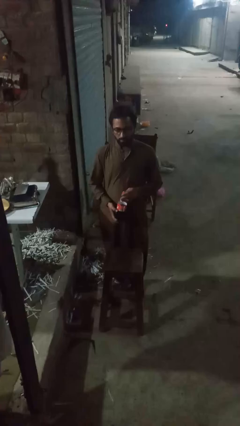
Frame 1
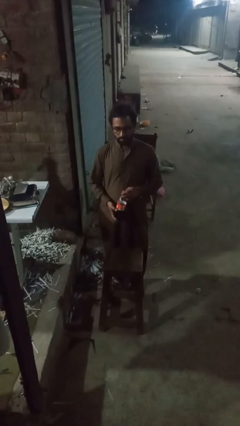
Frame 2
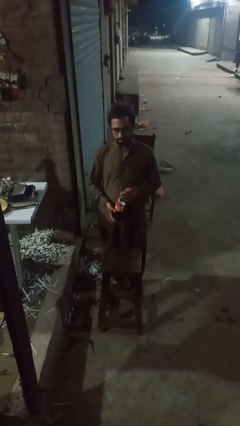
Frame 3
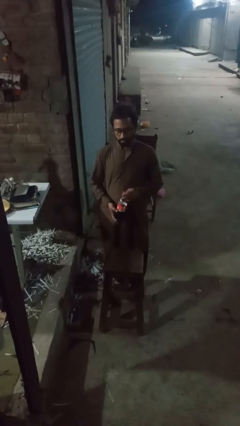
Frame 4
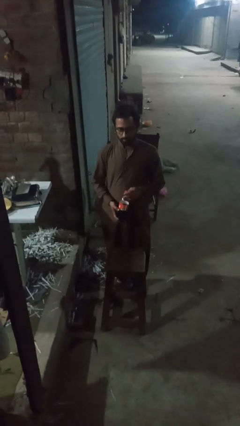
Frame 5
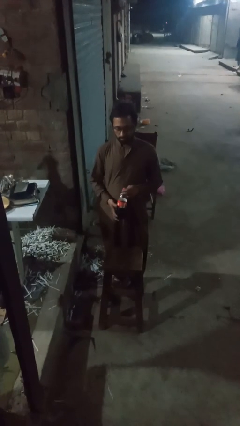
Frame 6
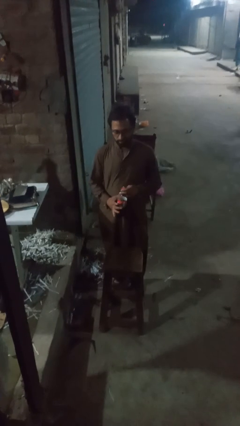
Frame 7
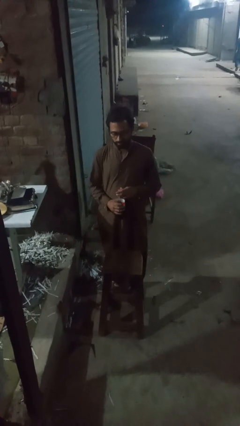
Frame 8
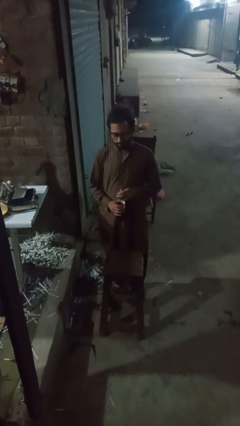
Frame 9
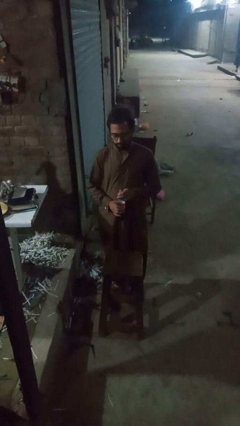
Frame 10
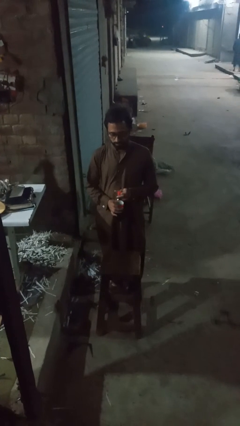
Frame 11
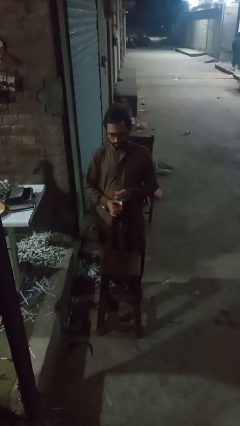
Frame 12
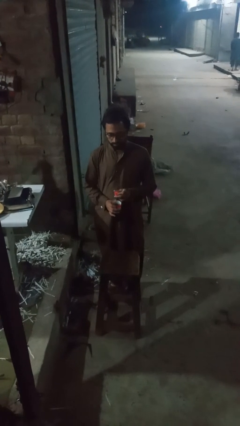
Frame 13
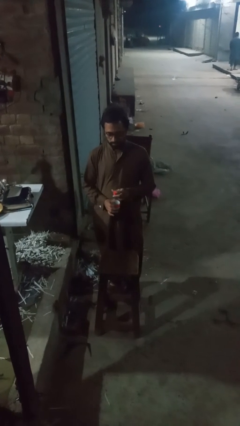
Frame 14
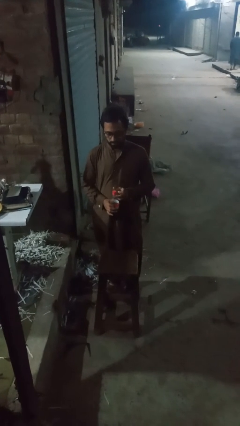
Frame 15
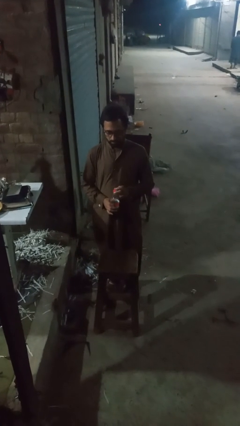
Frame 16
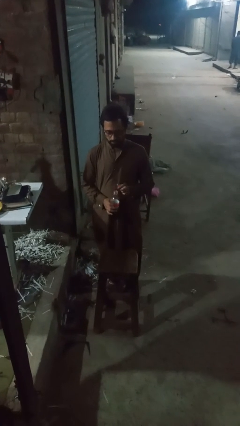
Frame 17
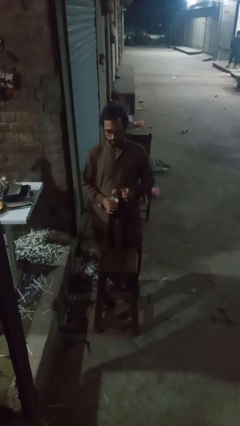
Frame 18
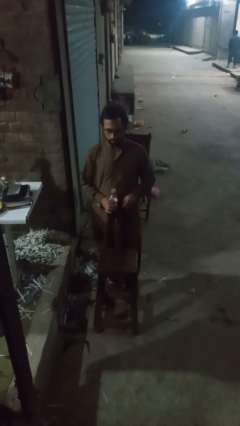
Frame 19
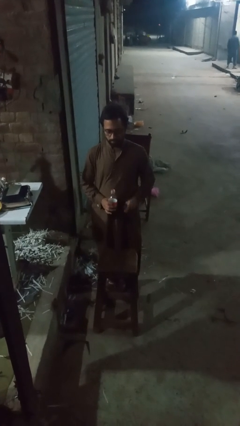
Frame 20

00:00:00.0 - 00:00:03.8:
person unscrews lid from bottle

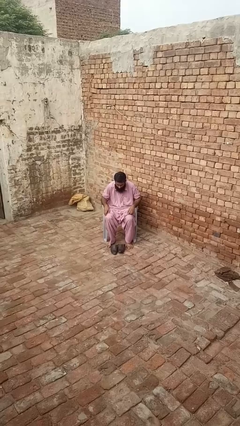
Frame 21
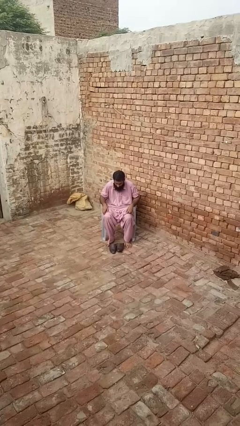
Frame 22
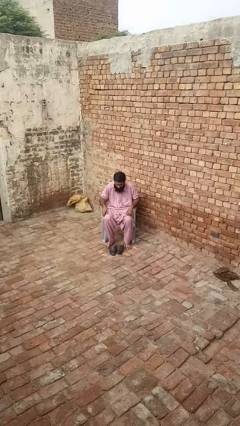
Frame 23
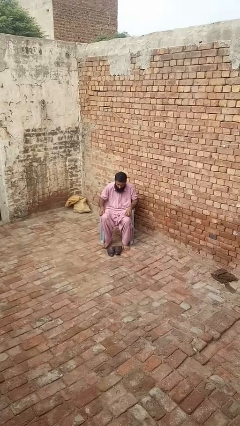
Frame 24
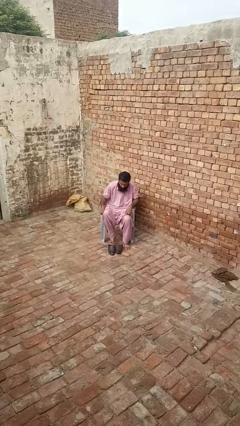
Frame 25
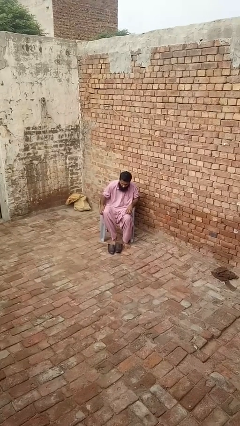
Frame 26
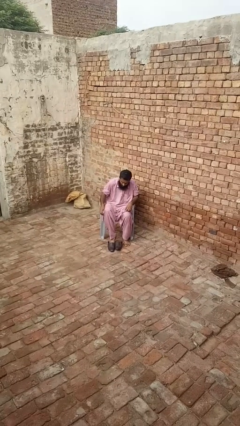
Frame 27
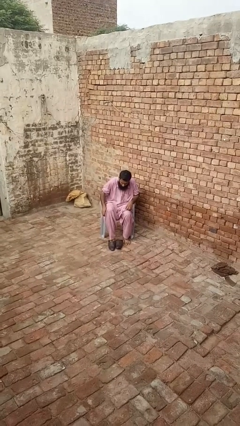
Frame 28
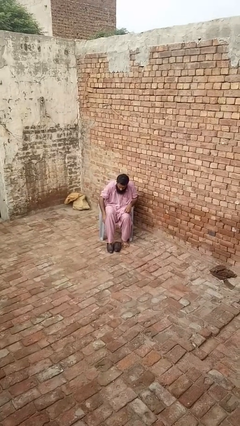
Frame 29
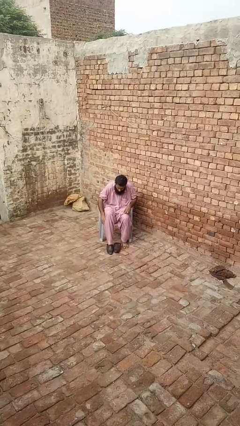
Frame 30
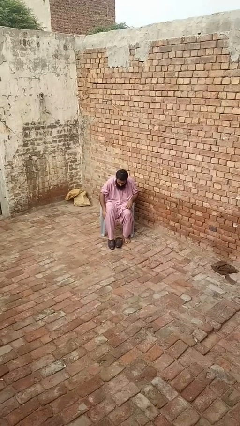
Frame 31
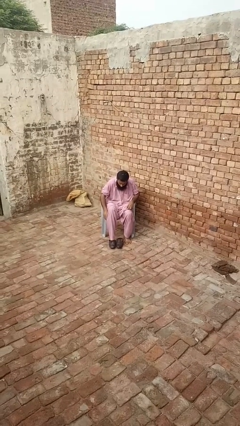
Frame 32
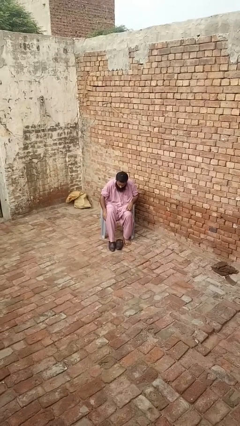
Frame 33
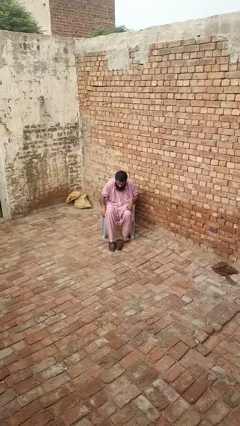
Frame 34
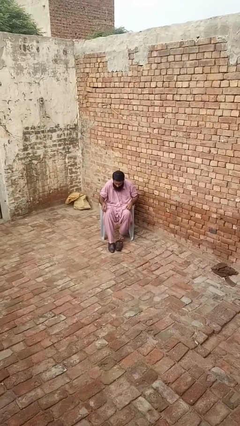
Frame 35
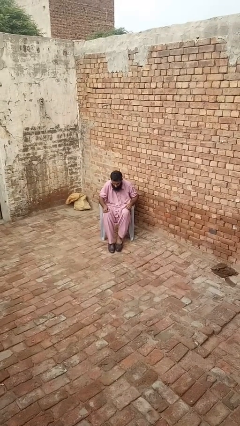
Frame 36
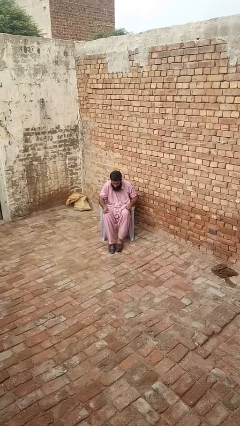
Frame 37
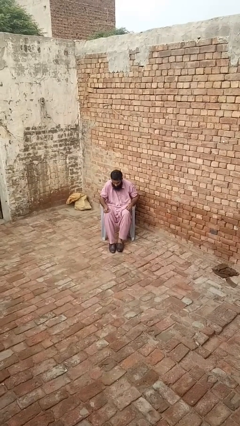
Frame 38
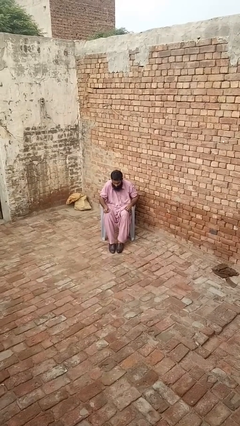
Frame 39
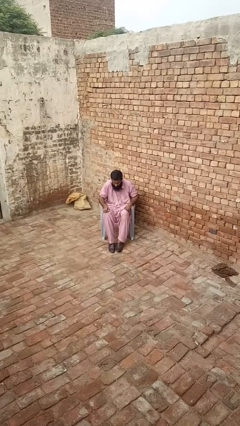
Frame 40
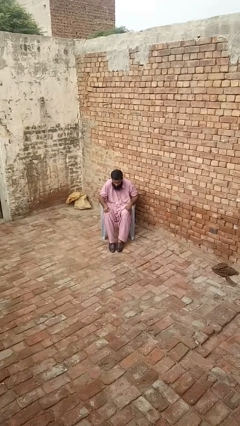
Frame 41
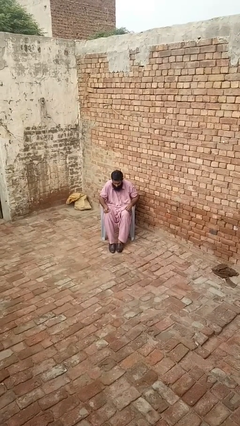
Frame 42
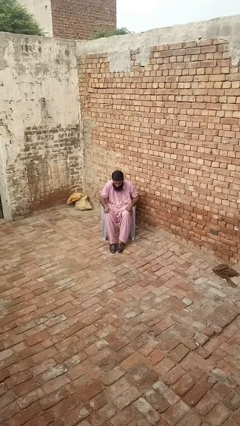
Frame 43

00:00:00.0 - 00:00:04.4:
person puts on shoes

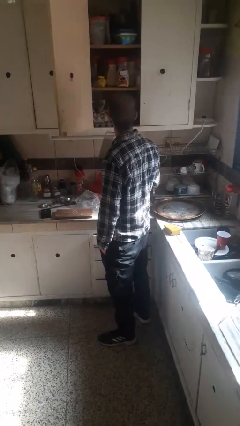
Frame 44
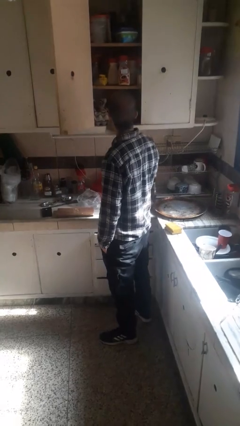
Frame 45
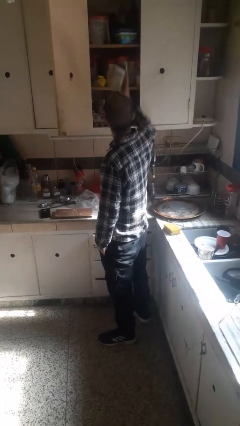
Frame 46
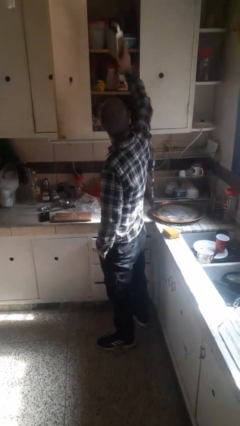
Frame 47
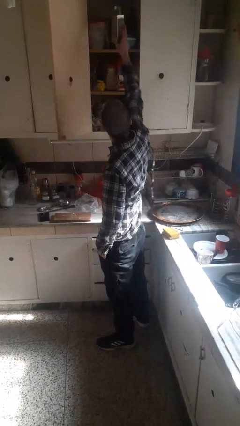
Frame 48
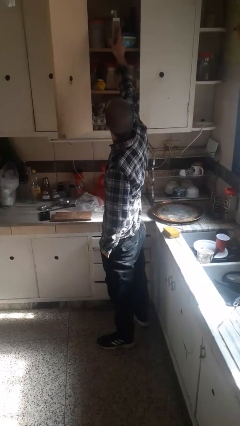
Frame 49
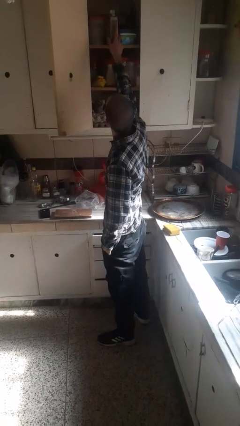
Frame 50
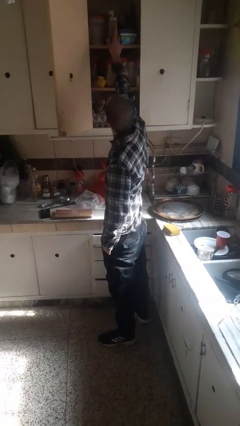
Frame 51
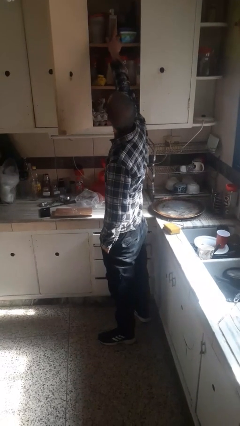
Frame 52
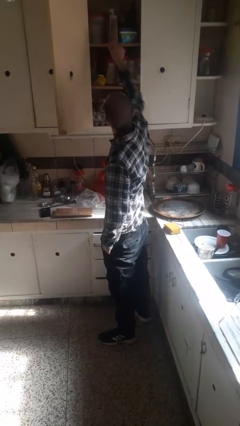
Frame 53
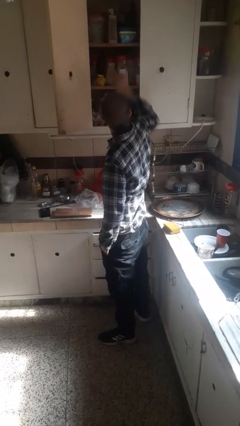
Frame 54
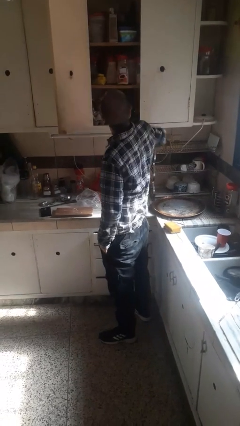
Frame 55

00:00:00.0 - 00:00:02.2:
person picks up object from cabinet

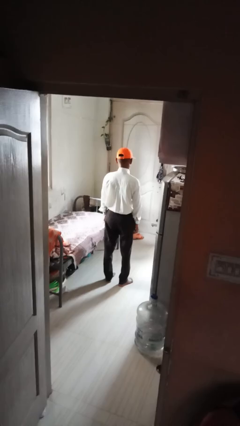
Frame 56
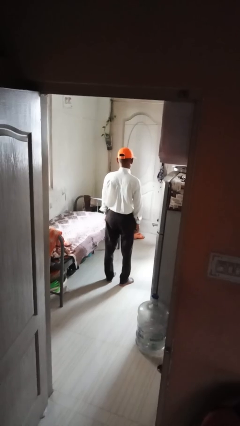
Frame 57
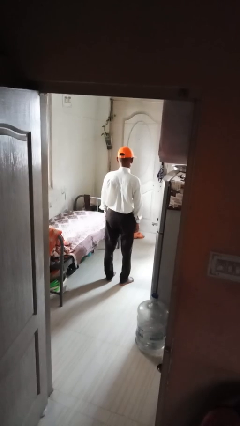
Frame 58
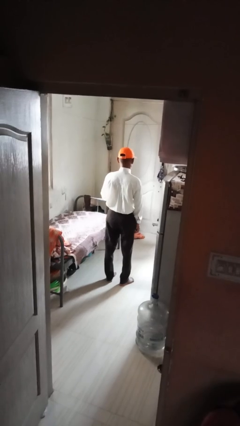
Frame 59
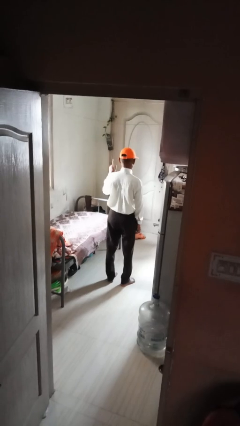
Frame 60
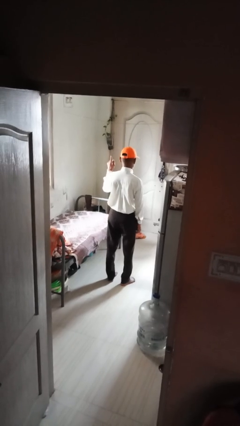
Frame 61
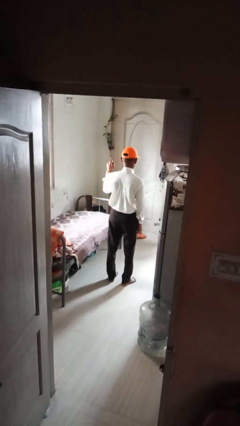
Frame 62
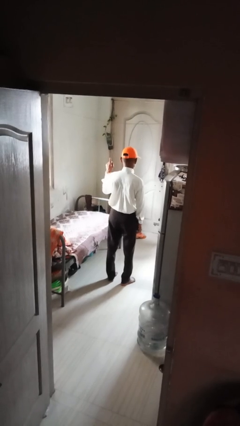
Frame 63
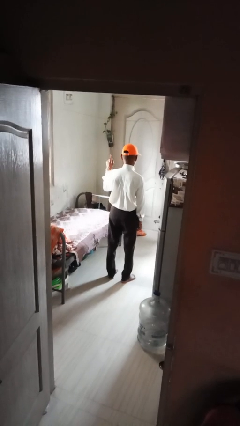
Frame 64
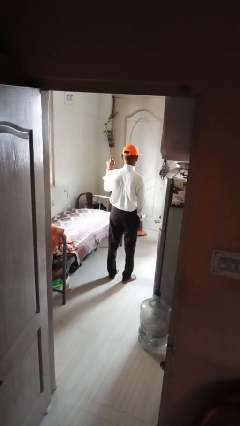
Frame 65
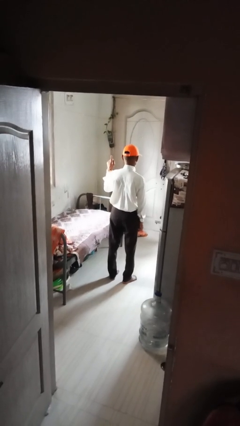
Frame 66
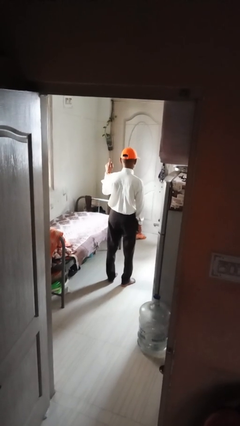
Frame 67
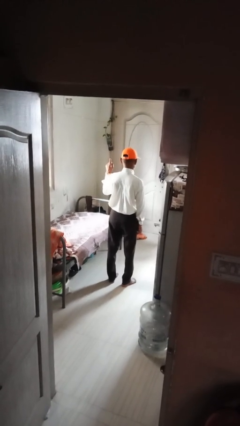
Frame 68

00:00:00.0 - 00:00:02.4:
person gestures number one

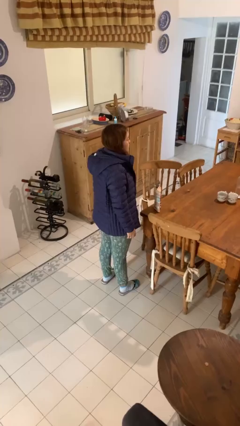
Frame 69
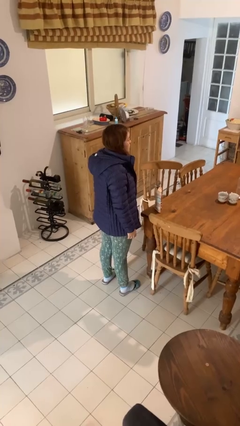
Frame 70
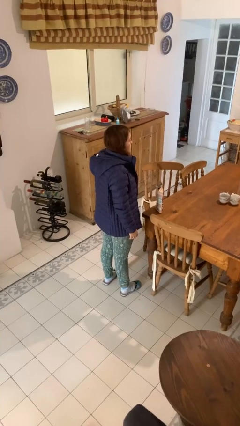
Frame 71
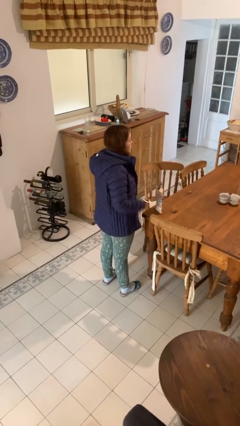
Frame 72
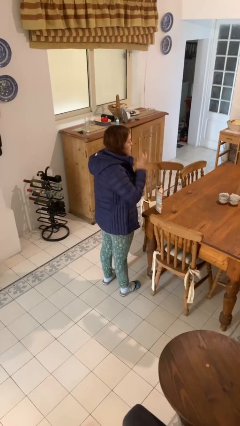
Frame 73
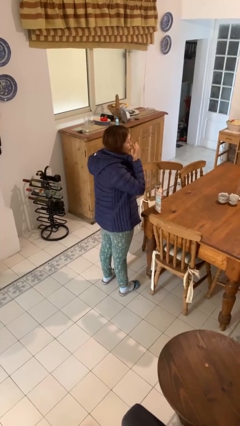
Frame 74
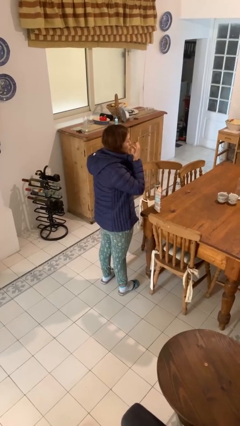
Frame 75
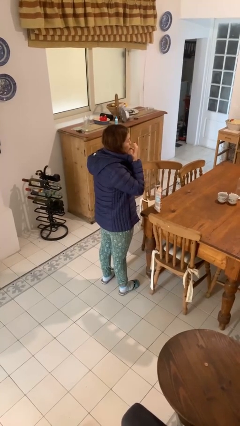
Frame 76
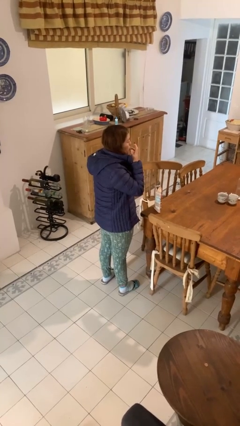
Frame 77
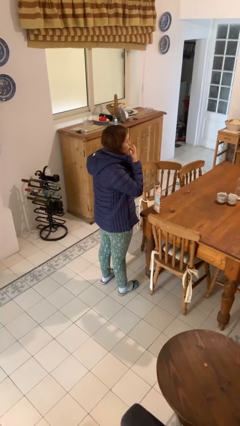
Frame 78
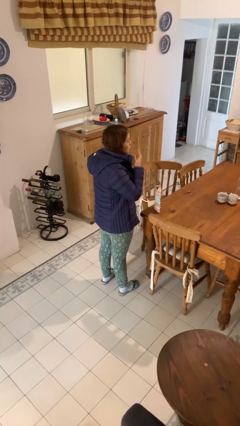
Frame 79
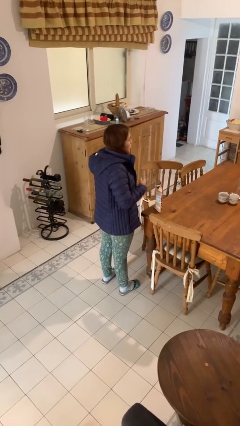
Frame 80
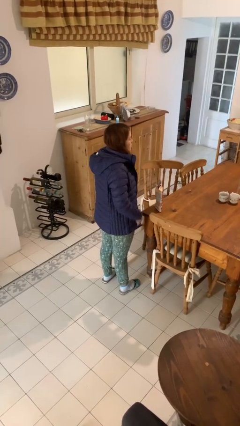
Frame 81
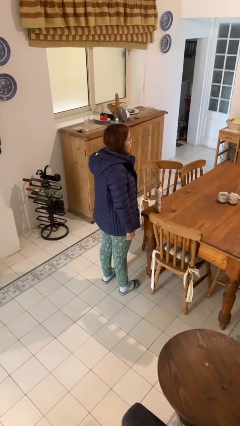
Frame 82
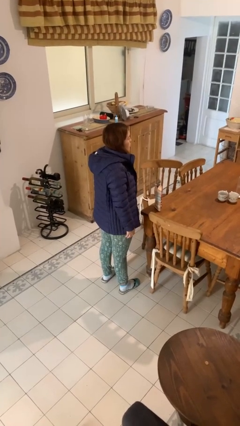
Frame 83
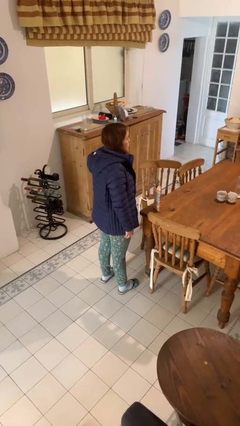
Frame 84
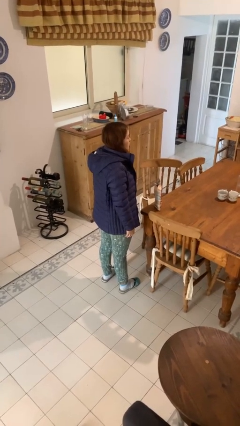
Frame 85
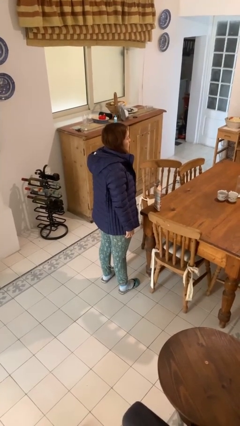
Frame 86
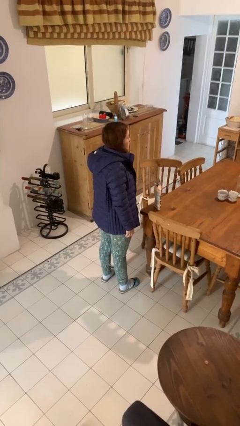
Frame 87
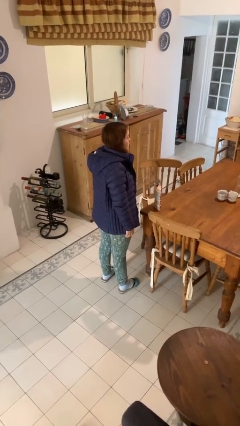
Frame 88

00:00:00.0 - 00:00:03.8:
person licks fingers

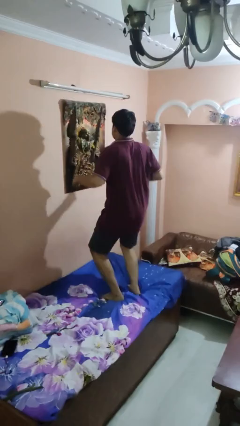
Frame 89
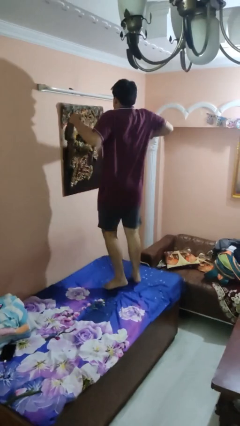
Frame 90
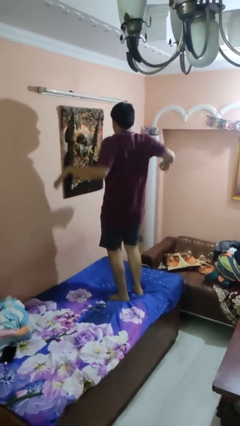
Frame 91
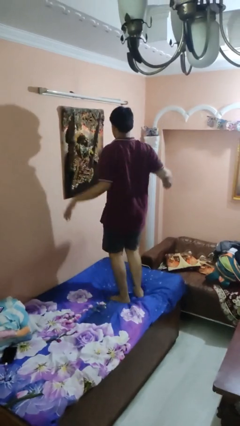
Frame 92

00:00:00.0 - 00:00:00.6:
person jumps on bed
